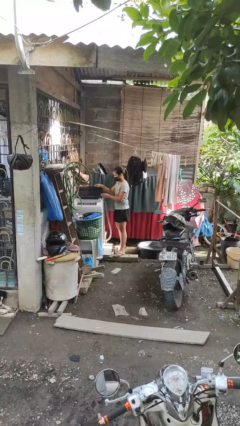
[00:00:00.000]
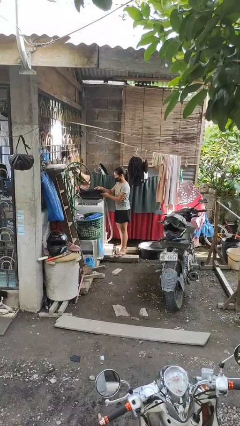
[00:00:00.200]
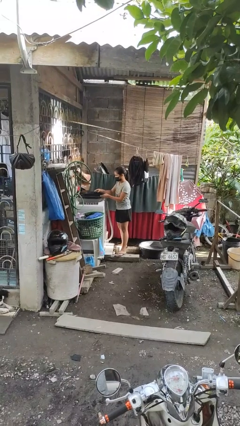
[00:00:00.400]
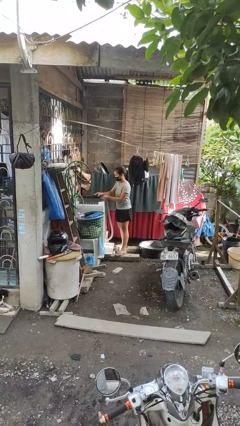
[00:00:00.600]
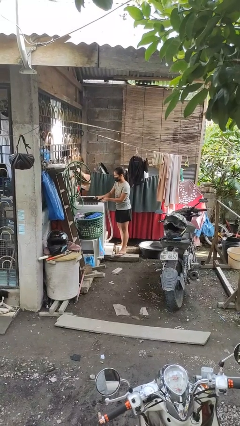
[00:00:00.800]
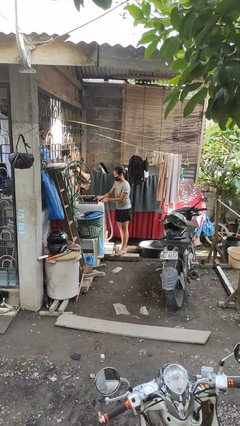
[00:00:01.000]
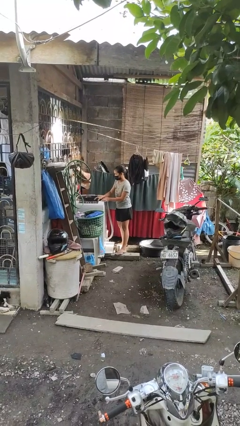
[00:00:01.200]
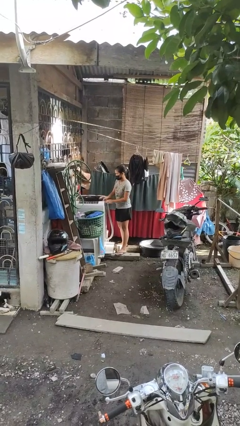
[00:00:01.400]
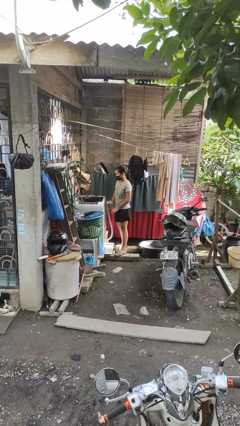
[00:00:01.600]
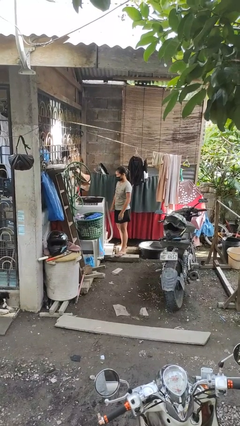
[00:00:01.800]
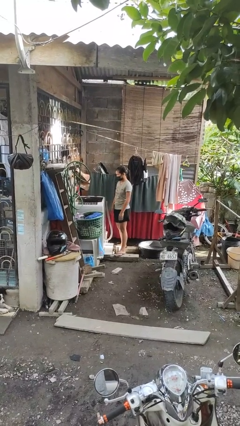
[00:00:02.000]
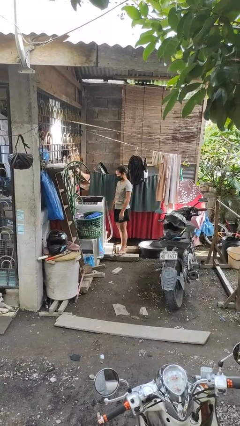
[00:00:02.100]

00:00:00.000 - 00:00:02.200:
person closes clothes washer

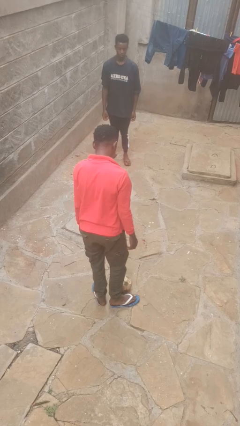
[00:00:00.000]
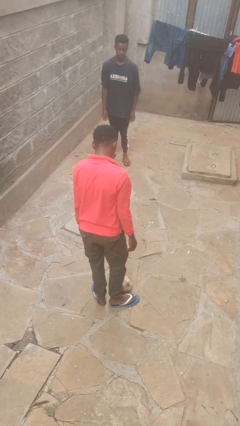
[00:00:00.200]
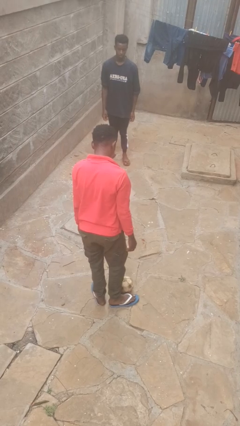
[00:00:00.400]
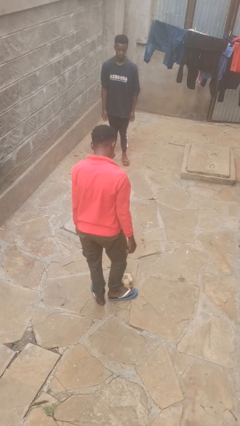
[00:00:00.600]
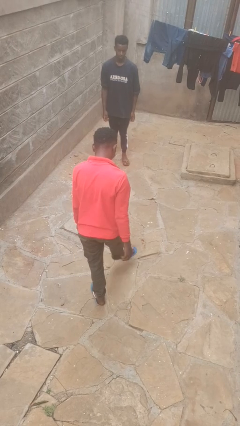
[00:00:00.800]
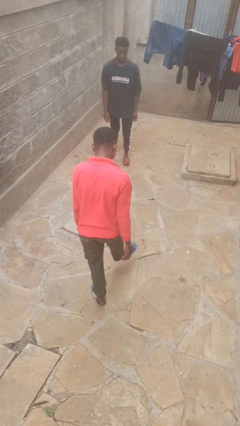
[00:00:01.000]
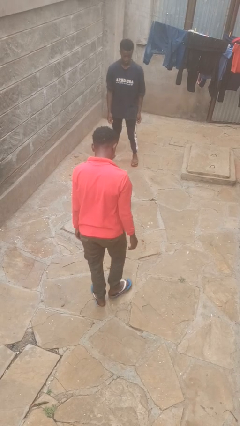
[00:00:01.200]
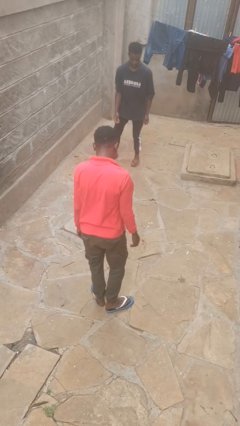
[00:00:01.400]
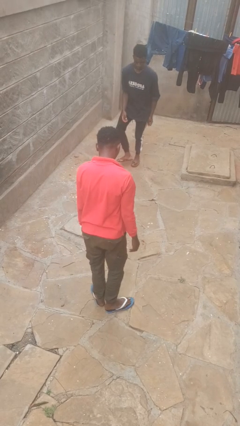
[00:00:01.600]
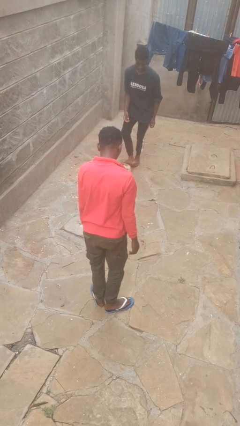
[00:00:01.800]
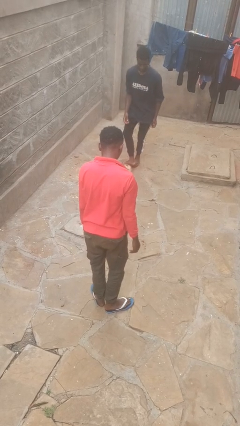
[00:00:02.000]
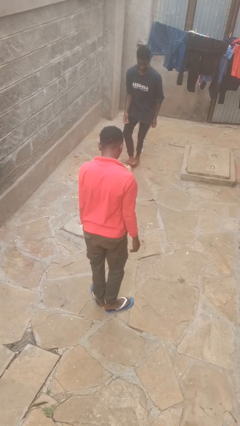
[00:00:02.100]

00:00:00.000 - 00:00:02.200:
person kicks object to person

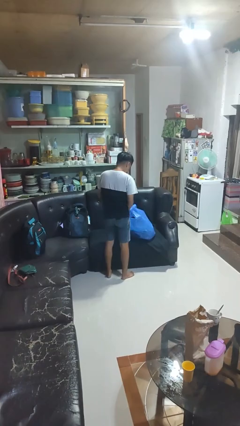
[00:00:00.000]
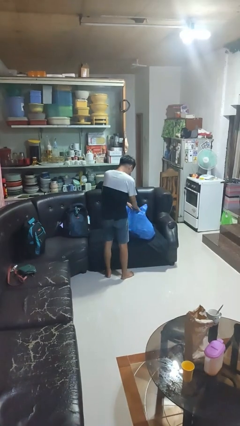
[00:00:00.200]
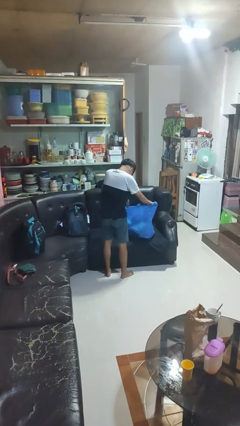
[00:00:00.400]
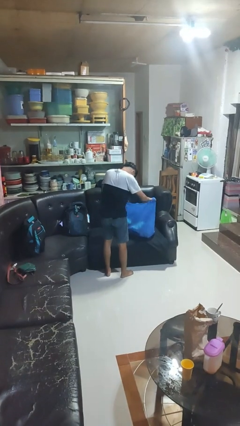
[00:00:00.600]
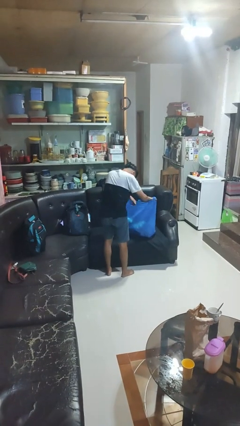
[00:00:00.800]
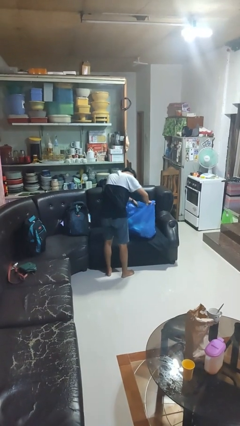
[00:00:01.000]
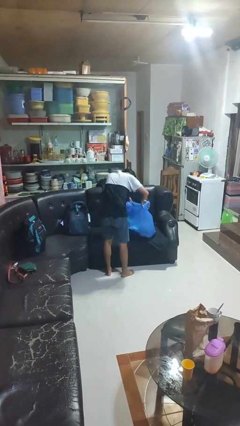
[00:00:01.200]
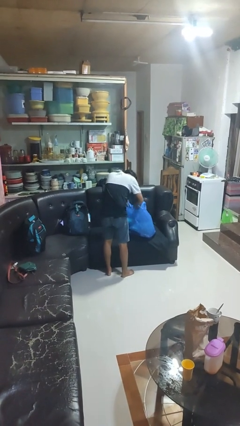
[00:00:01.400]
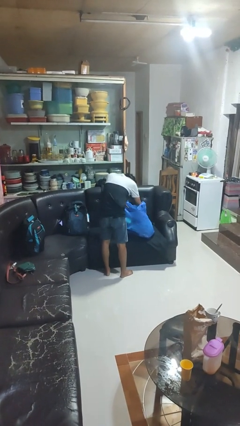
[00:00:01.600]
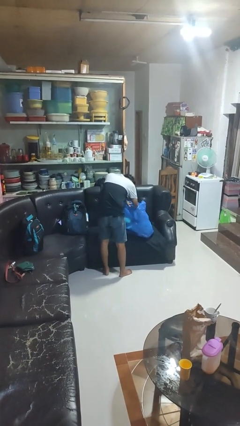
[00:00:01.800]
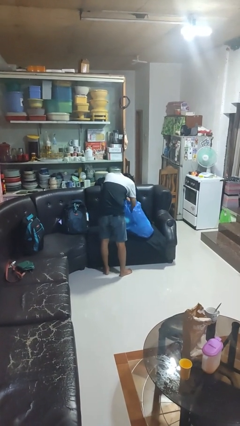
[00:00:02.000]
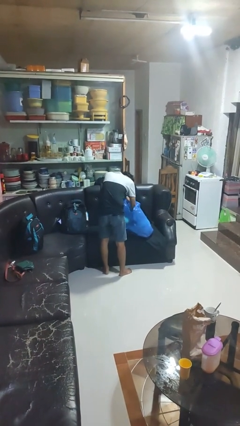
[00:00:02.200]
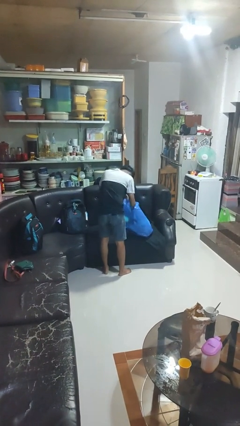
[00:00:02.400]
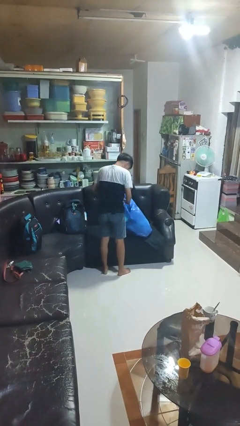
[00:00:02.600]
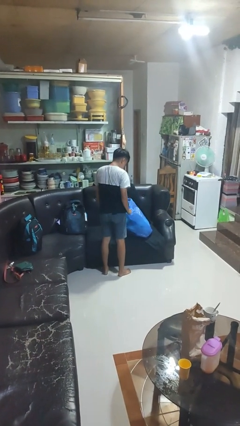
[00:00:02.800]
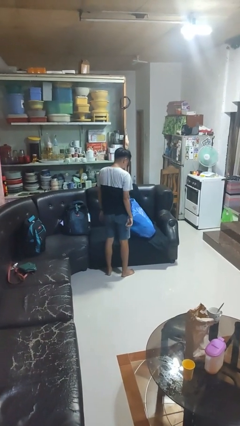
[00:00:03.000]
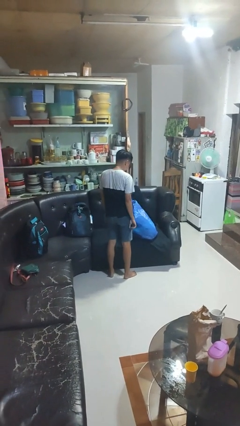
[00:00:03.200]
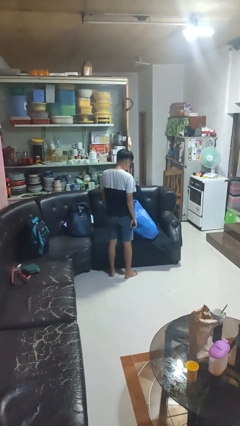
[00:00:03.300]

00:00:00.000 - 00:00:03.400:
person searches in bag

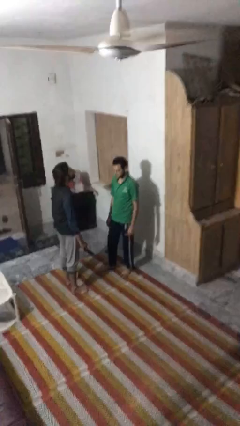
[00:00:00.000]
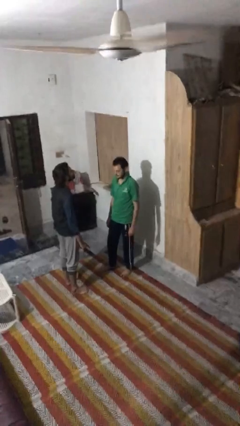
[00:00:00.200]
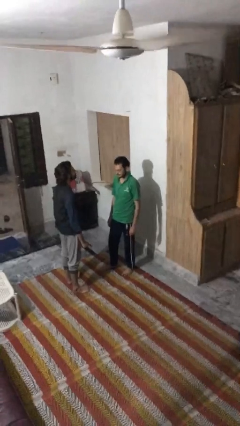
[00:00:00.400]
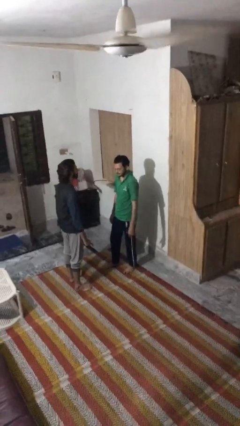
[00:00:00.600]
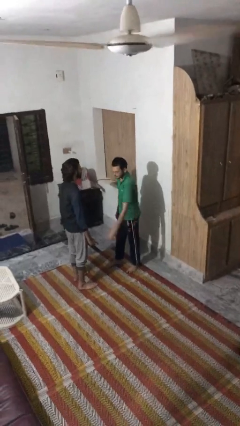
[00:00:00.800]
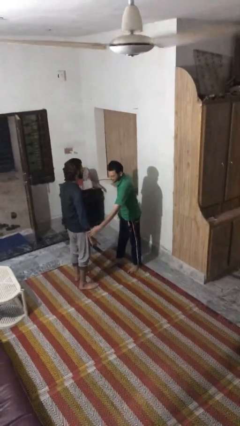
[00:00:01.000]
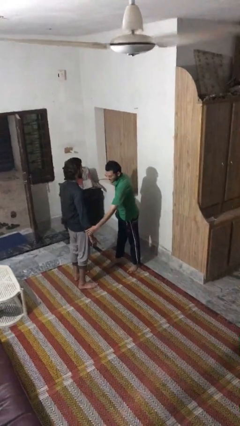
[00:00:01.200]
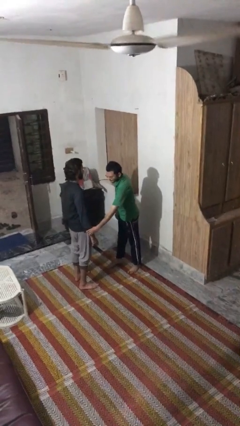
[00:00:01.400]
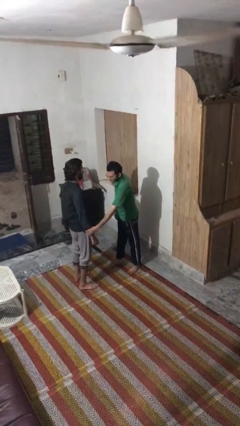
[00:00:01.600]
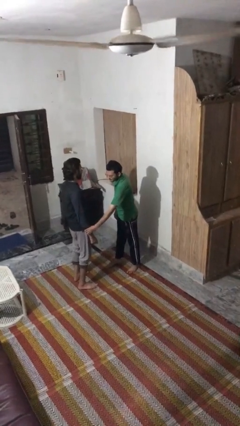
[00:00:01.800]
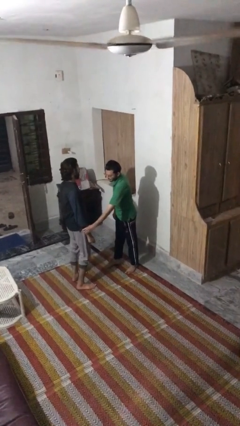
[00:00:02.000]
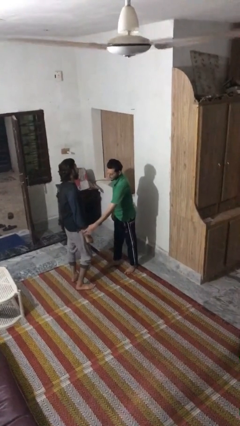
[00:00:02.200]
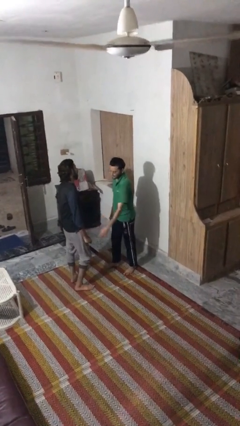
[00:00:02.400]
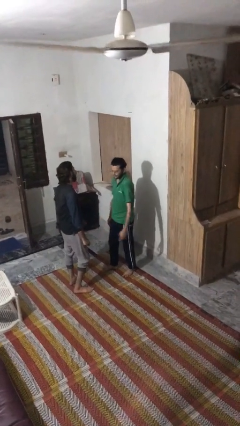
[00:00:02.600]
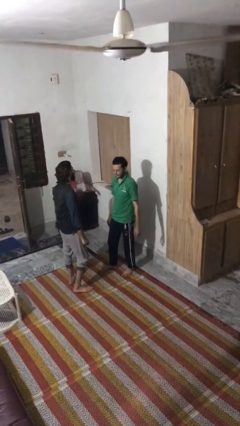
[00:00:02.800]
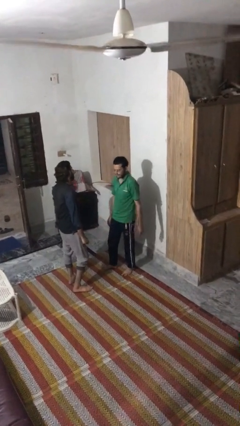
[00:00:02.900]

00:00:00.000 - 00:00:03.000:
person grabs person by forearm

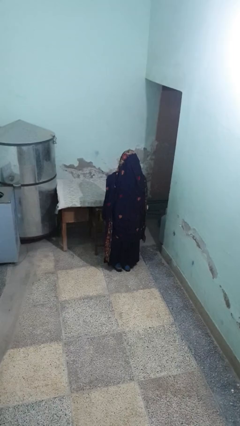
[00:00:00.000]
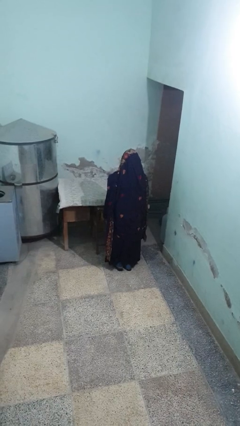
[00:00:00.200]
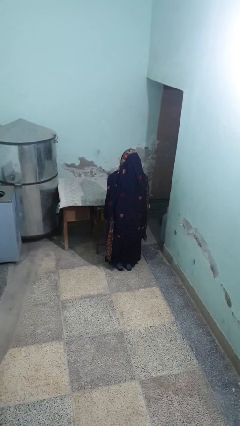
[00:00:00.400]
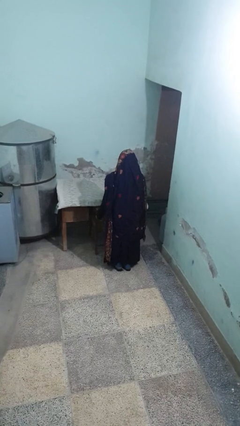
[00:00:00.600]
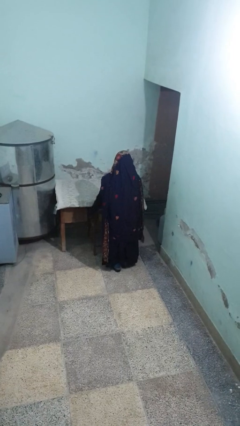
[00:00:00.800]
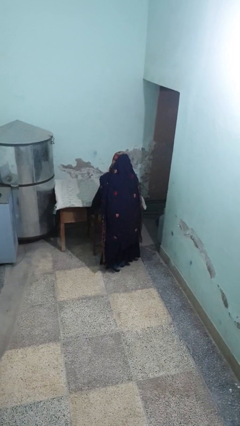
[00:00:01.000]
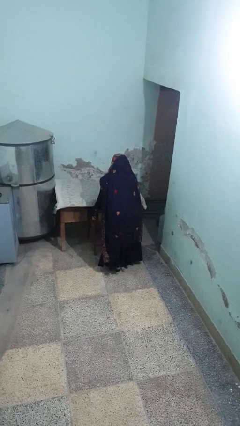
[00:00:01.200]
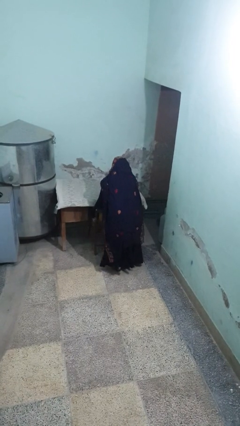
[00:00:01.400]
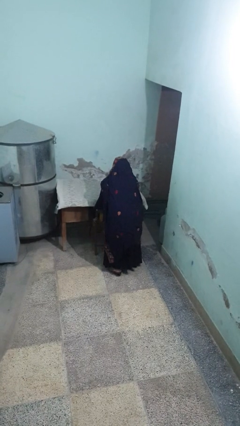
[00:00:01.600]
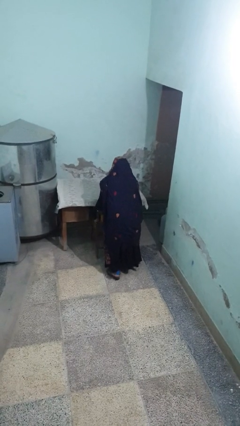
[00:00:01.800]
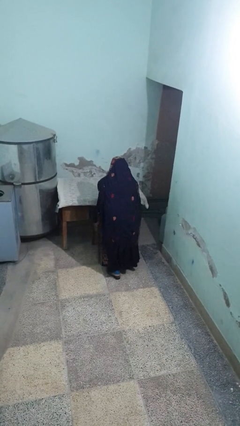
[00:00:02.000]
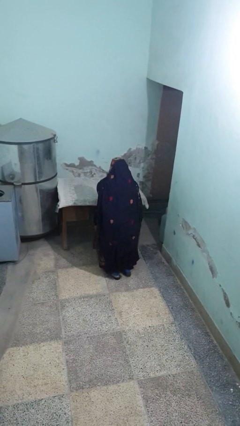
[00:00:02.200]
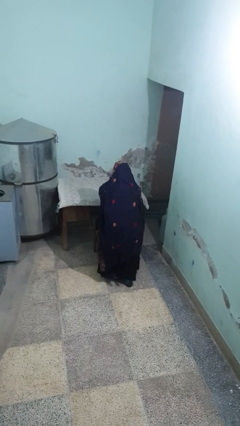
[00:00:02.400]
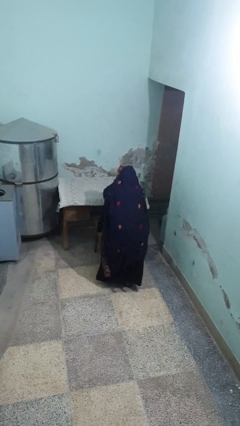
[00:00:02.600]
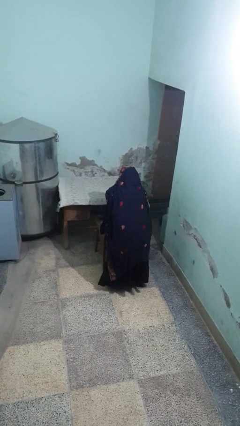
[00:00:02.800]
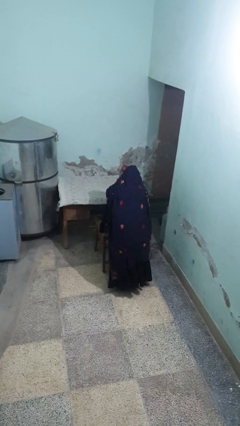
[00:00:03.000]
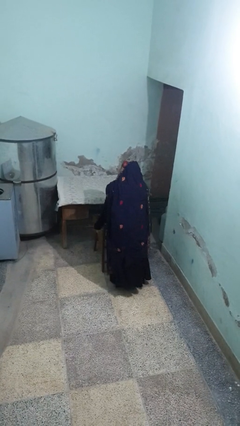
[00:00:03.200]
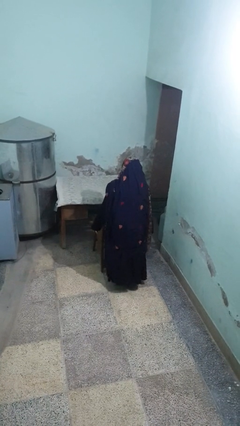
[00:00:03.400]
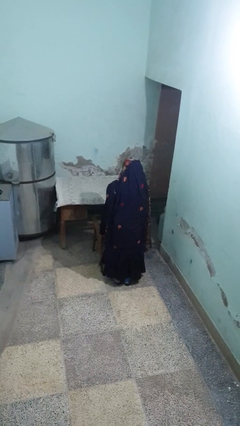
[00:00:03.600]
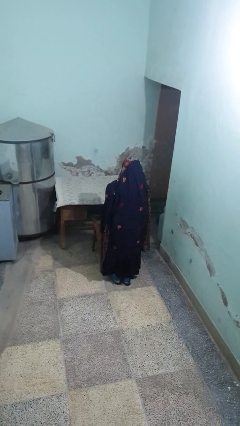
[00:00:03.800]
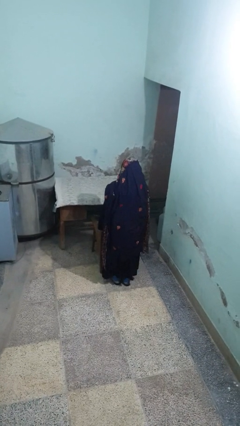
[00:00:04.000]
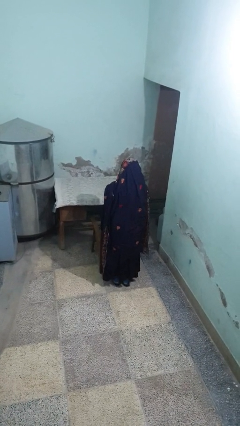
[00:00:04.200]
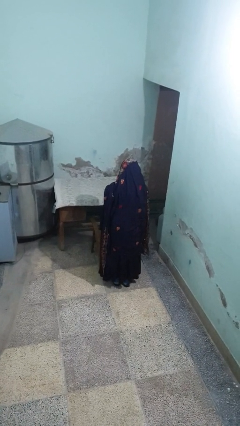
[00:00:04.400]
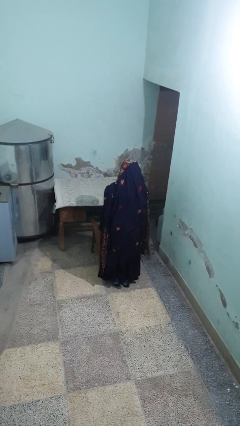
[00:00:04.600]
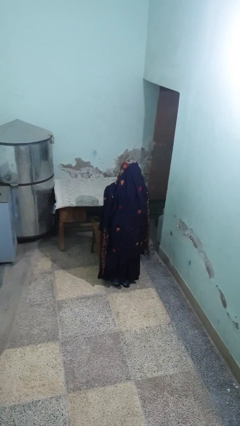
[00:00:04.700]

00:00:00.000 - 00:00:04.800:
person pulls out chair

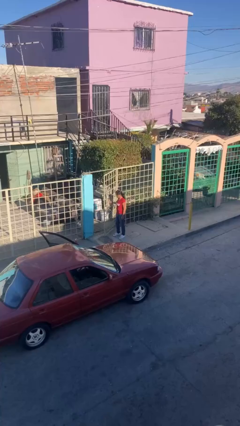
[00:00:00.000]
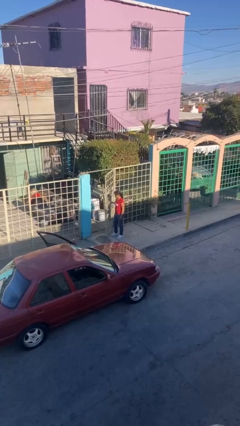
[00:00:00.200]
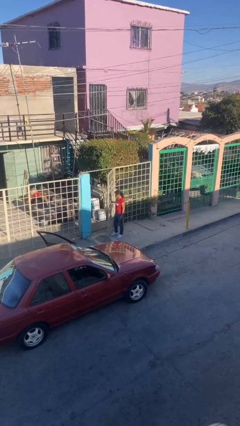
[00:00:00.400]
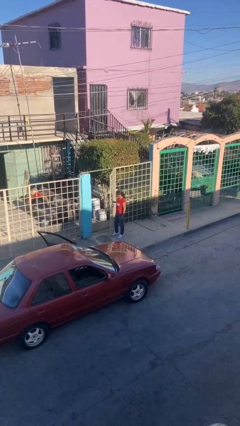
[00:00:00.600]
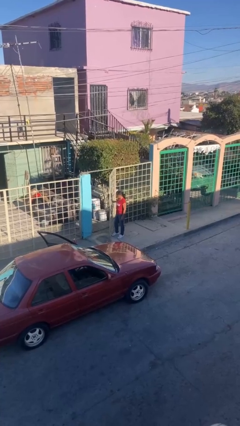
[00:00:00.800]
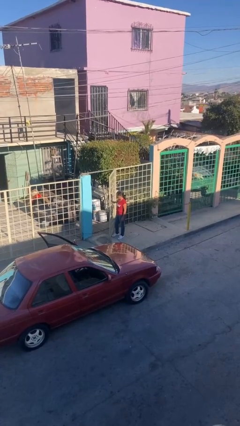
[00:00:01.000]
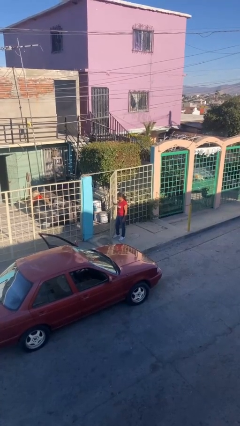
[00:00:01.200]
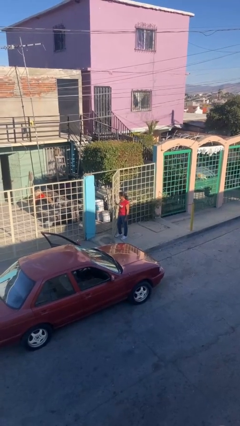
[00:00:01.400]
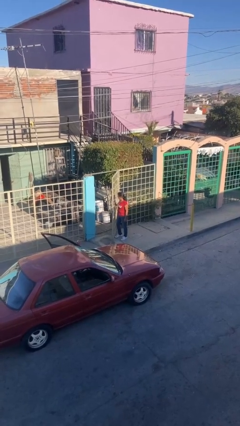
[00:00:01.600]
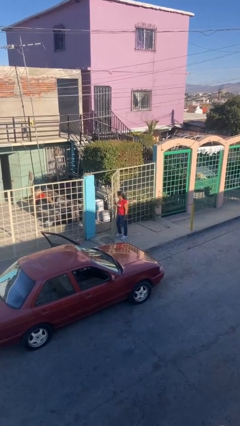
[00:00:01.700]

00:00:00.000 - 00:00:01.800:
person opens facility door
